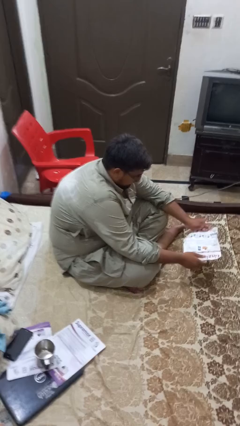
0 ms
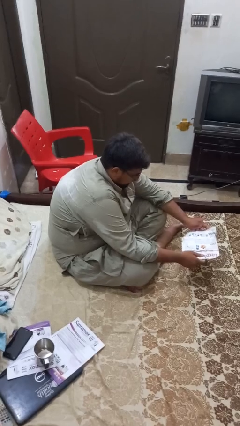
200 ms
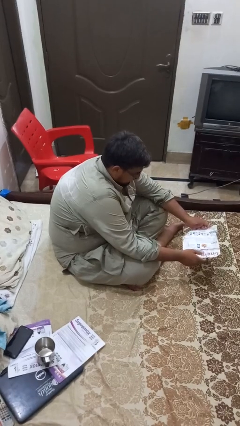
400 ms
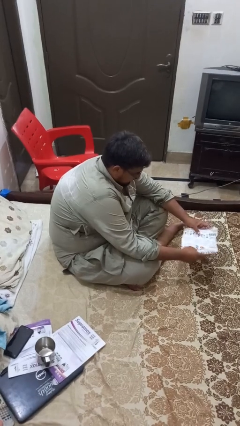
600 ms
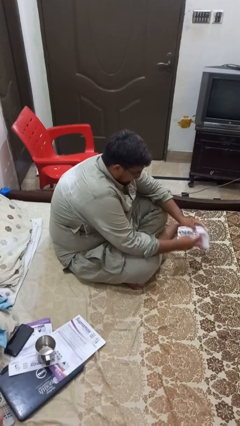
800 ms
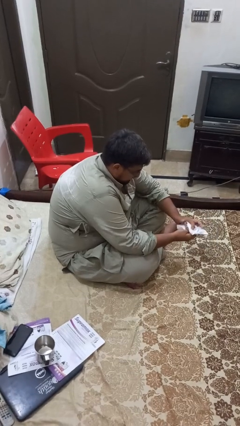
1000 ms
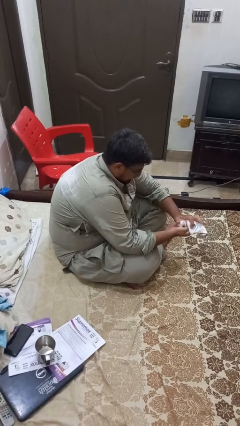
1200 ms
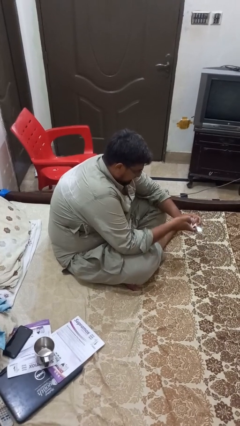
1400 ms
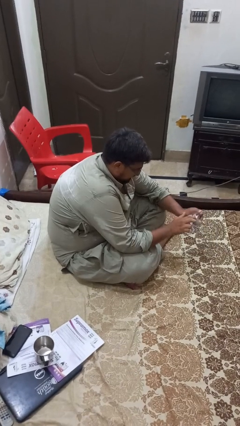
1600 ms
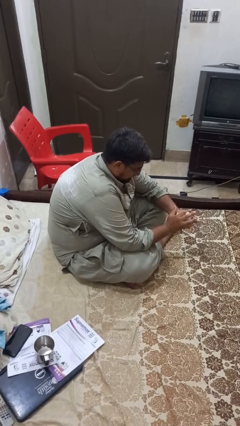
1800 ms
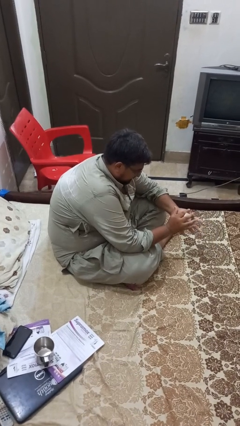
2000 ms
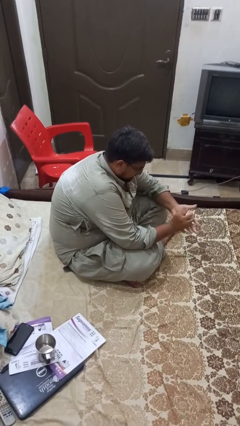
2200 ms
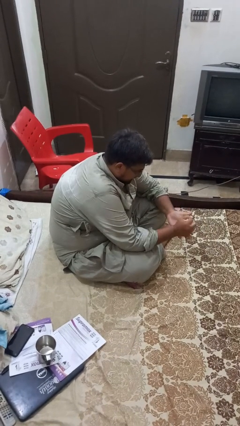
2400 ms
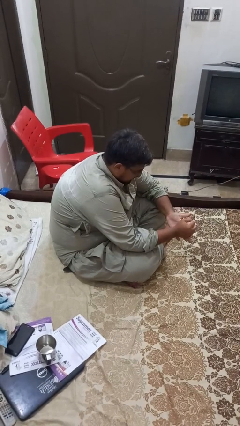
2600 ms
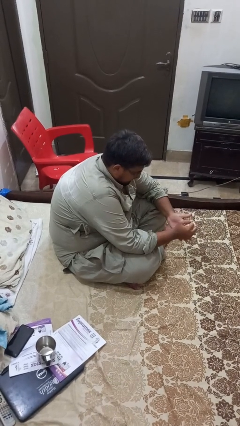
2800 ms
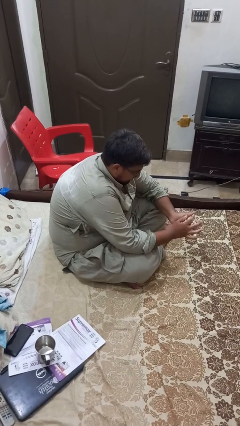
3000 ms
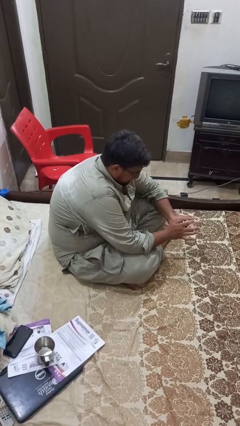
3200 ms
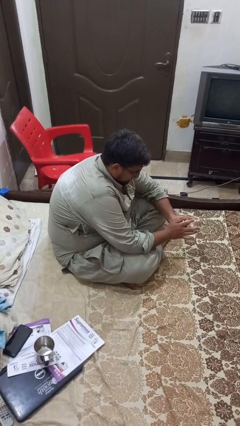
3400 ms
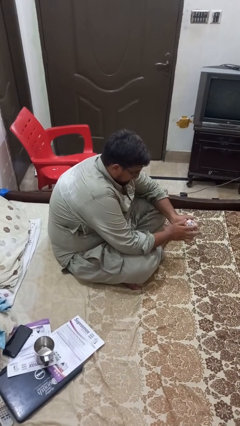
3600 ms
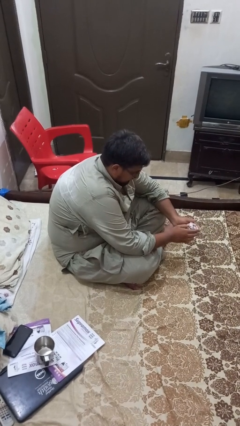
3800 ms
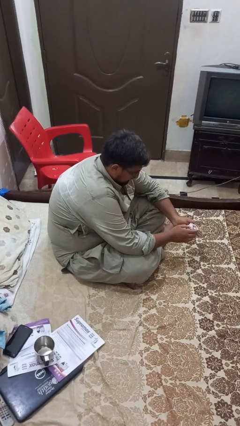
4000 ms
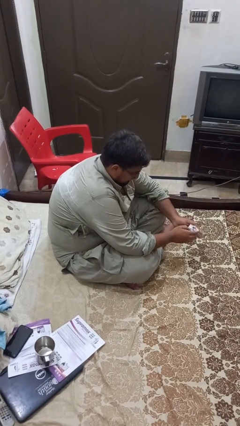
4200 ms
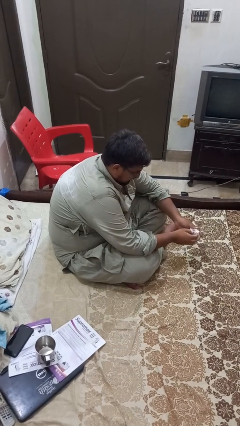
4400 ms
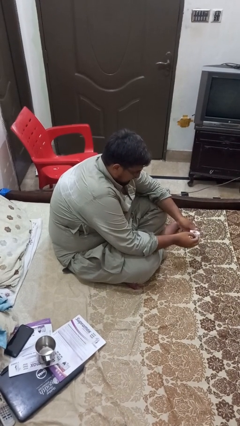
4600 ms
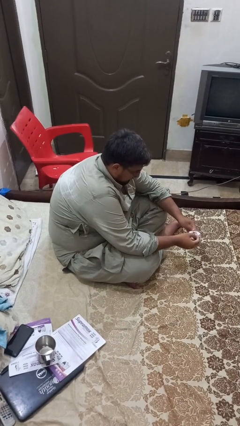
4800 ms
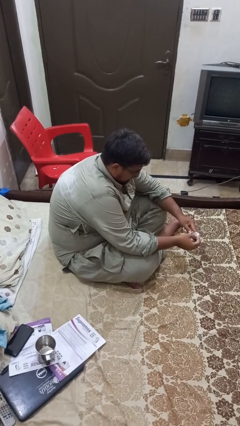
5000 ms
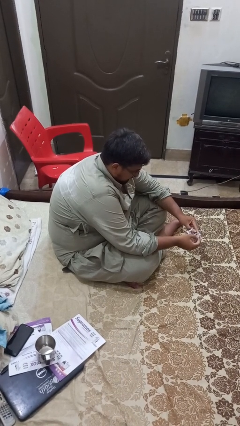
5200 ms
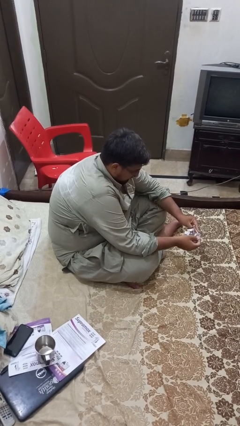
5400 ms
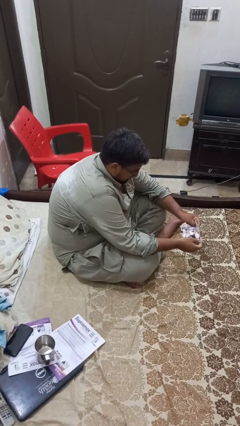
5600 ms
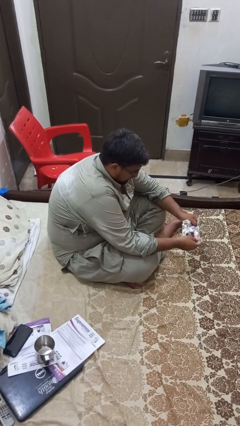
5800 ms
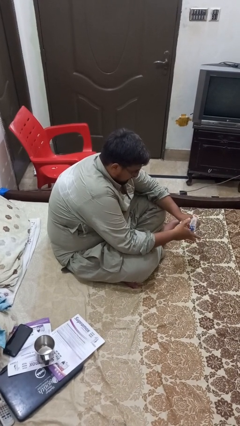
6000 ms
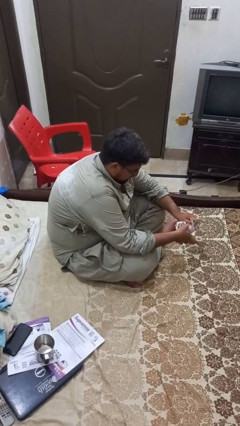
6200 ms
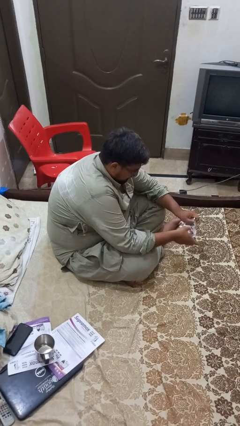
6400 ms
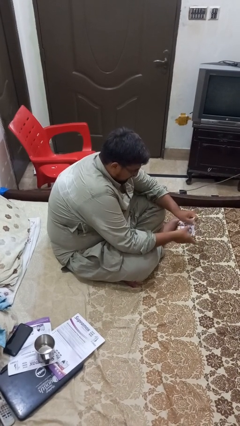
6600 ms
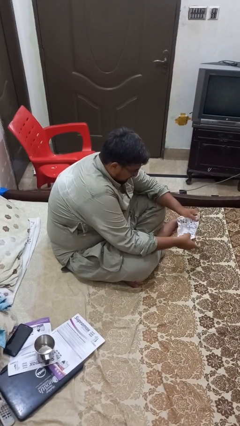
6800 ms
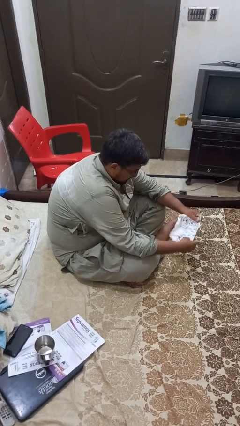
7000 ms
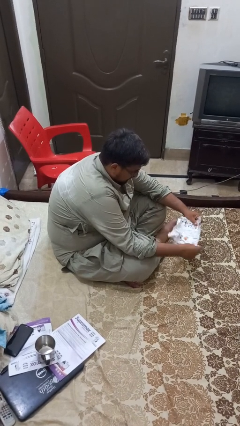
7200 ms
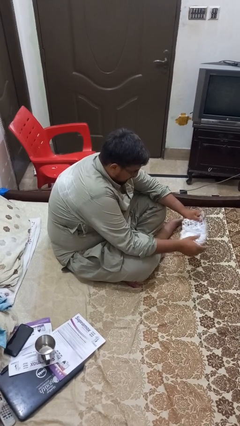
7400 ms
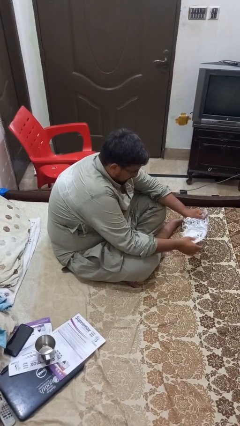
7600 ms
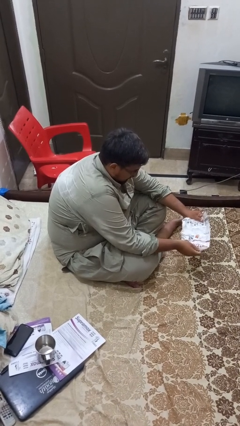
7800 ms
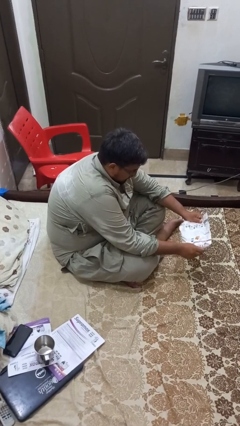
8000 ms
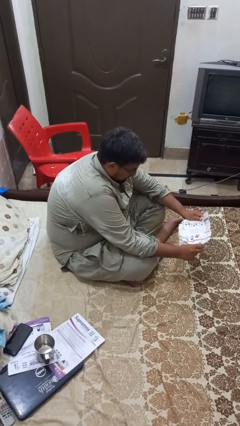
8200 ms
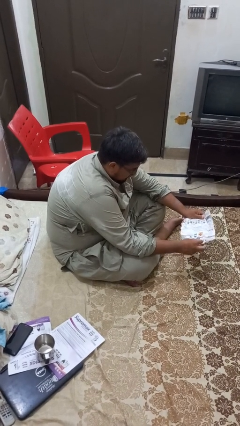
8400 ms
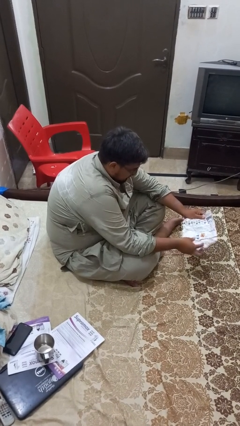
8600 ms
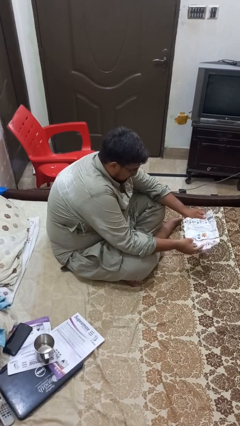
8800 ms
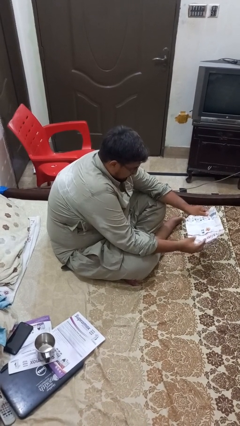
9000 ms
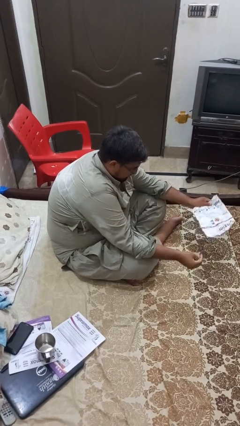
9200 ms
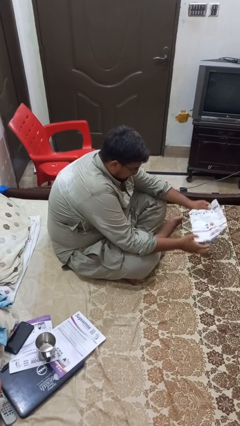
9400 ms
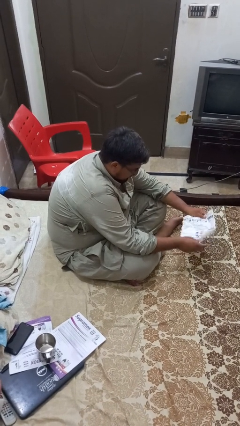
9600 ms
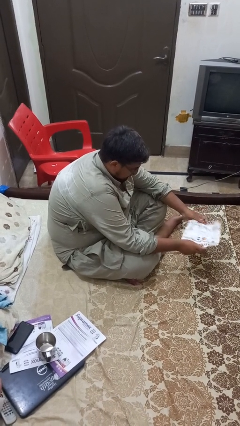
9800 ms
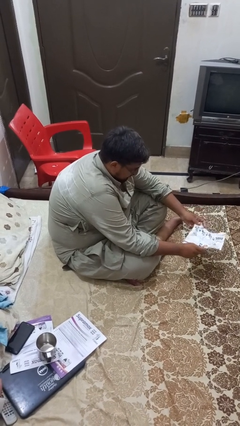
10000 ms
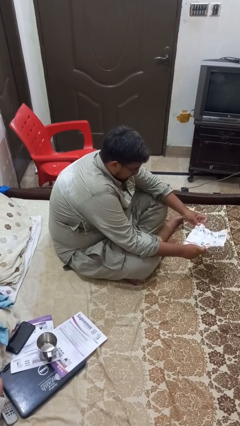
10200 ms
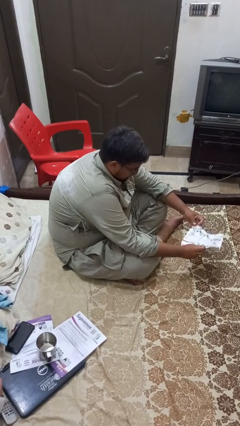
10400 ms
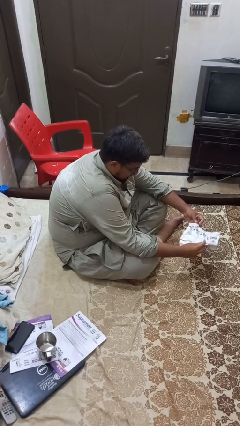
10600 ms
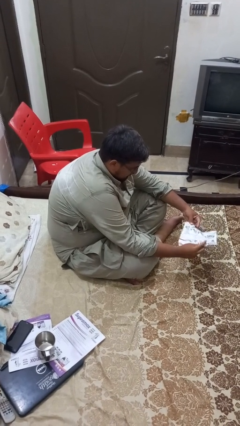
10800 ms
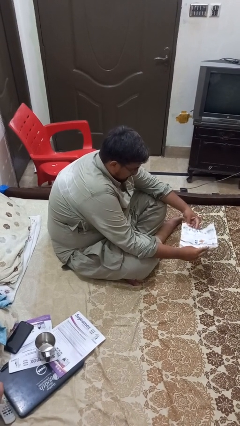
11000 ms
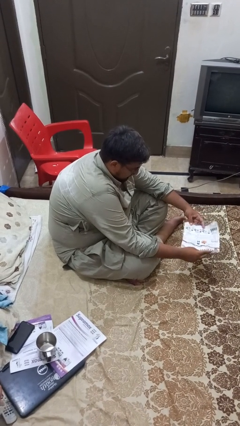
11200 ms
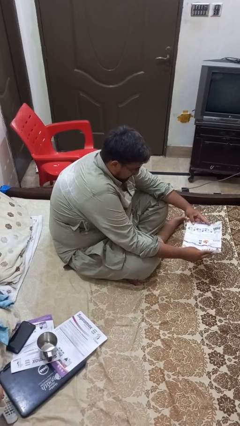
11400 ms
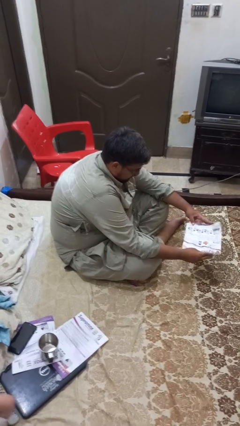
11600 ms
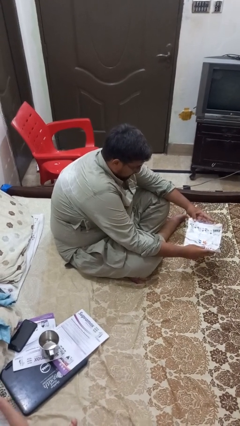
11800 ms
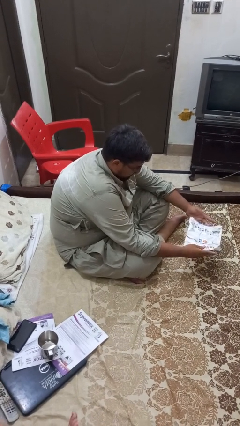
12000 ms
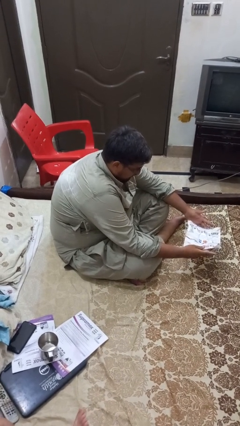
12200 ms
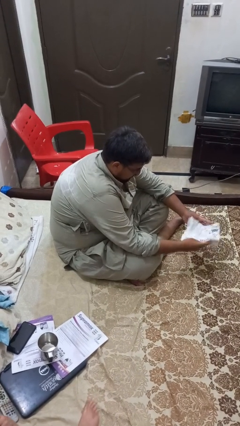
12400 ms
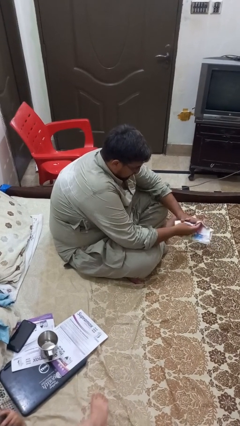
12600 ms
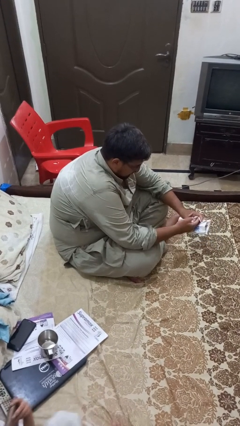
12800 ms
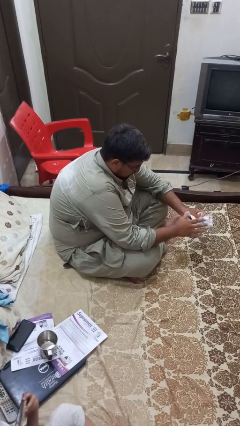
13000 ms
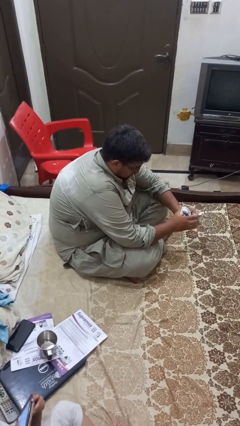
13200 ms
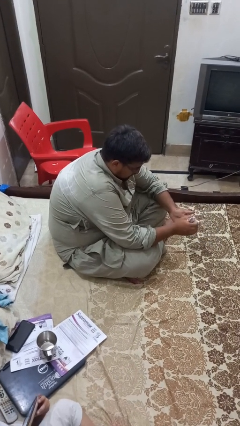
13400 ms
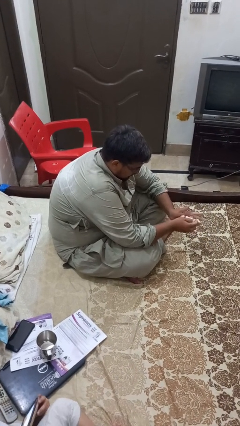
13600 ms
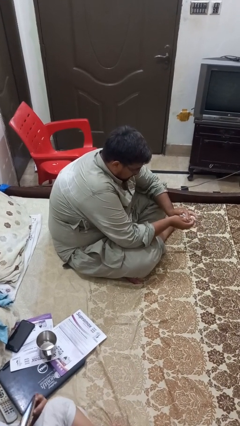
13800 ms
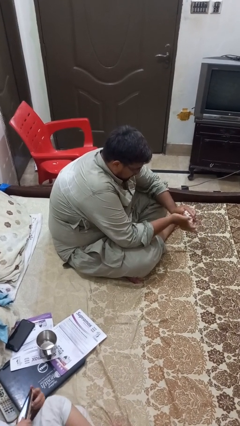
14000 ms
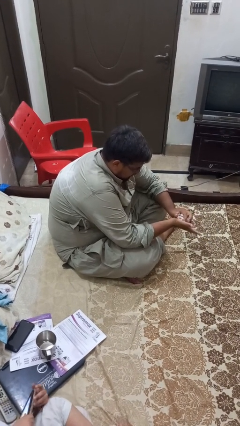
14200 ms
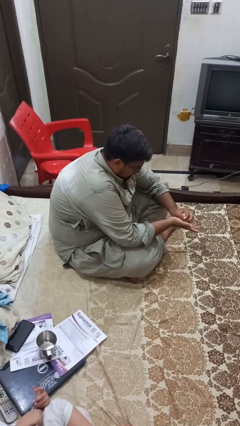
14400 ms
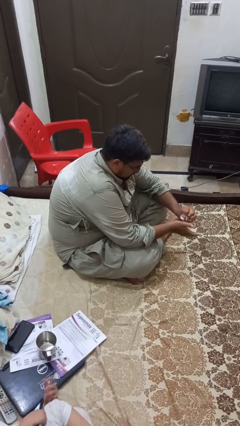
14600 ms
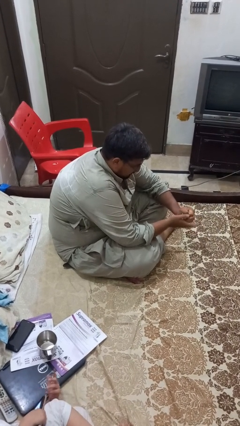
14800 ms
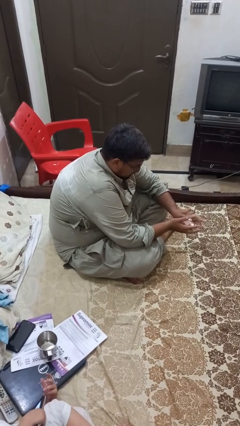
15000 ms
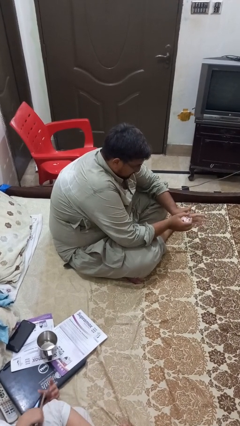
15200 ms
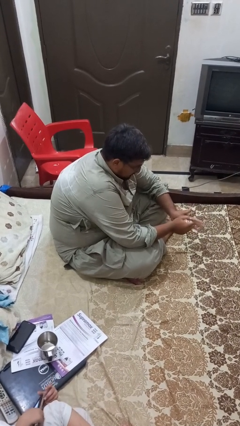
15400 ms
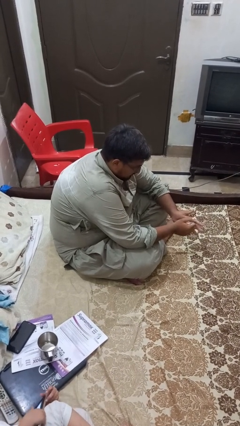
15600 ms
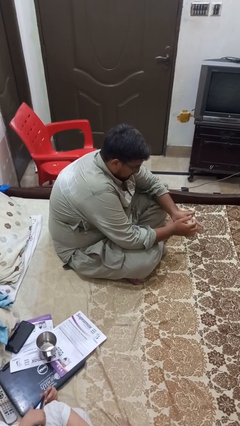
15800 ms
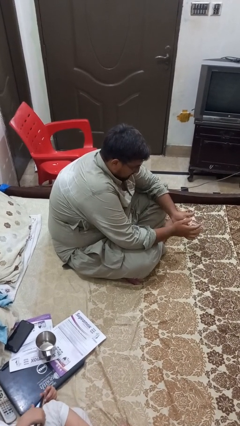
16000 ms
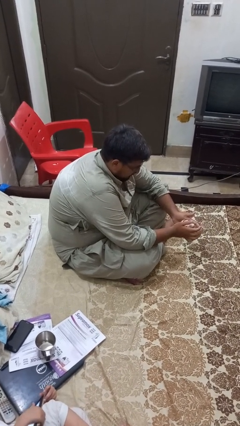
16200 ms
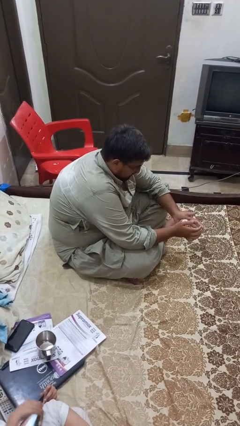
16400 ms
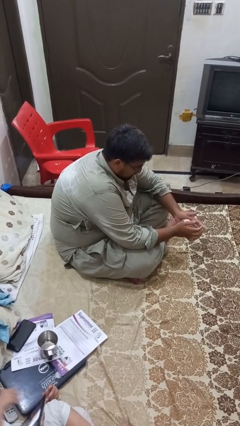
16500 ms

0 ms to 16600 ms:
person crumples paper

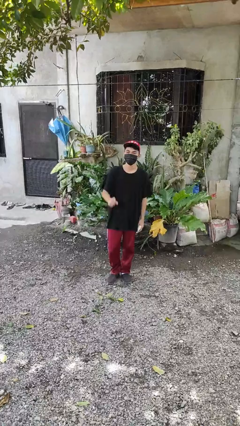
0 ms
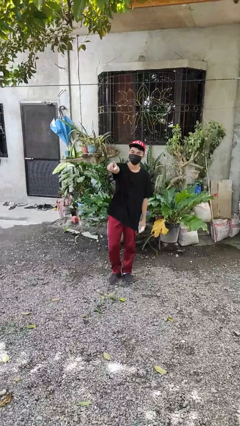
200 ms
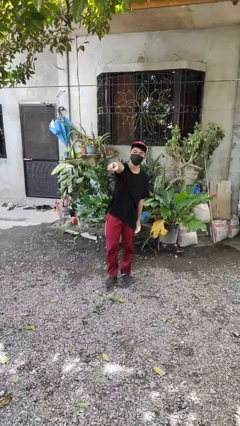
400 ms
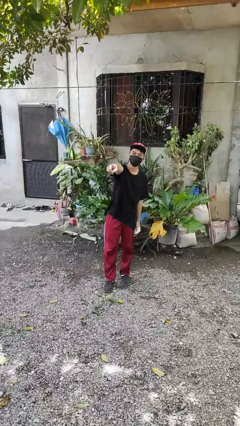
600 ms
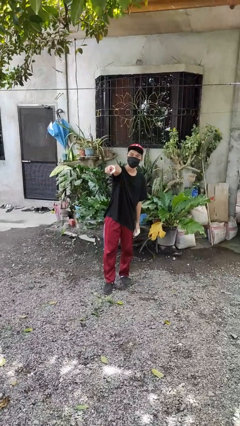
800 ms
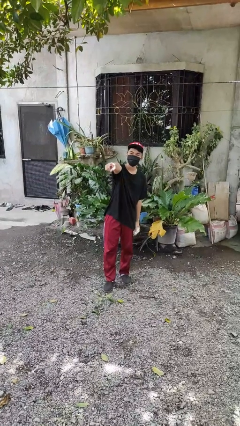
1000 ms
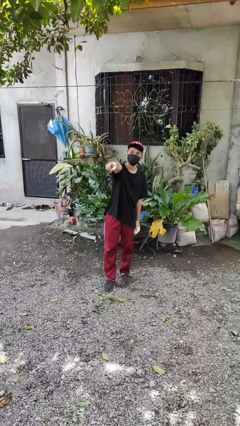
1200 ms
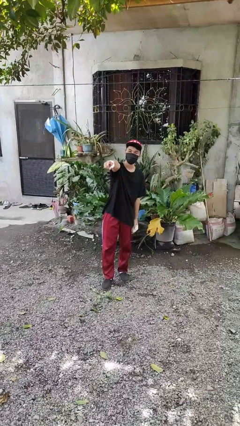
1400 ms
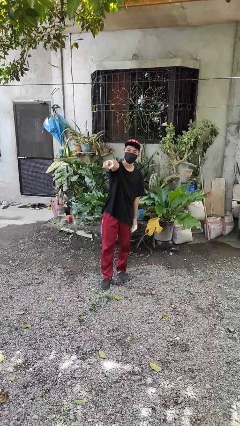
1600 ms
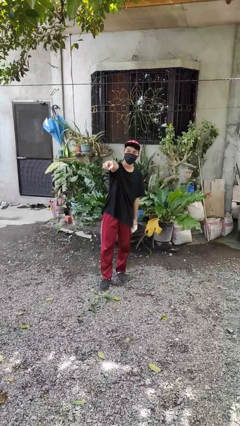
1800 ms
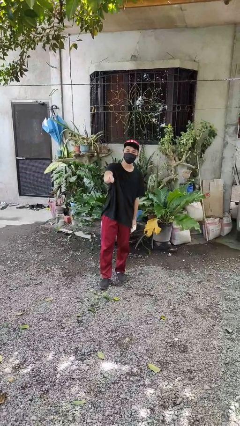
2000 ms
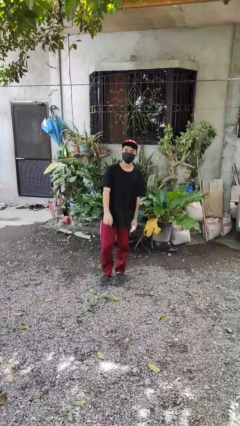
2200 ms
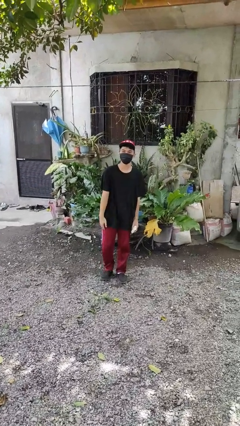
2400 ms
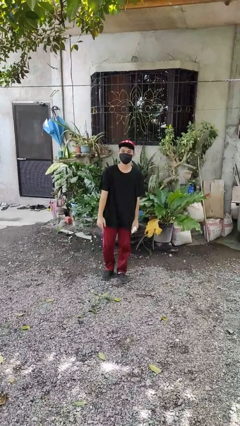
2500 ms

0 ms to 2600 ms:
person points at person
